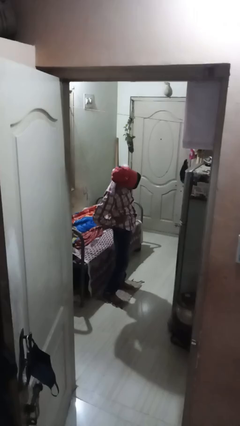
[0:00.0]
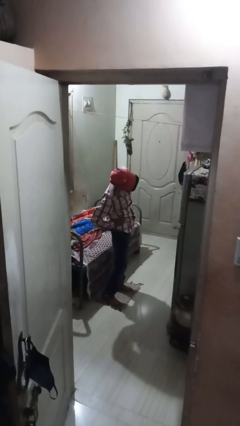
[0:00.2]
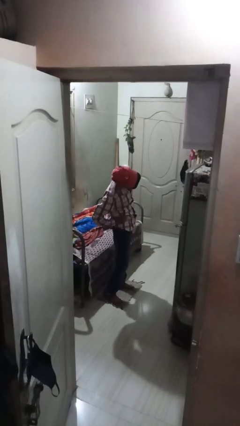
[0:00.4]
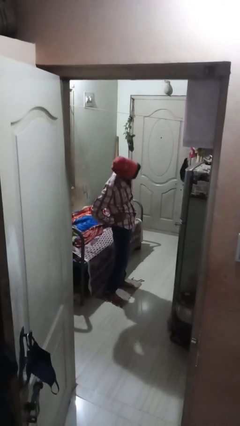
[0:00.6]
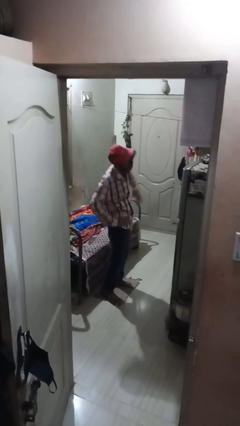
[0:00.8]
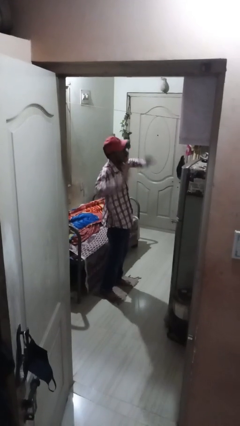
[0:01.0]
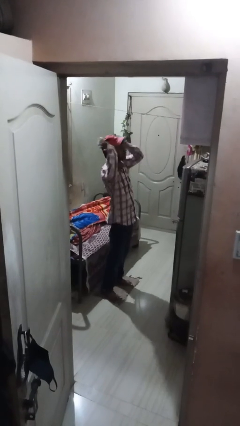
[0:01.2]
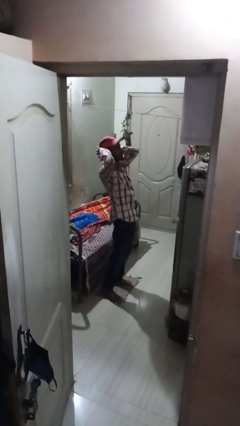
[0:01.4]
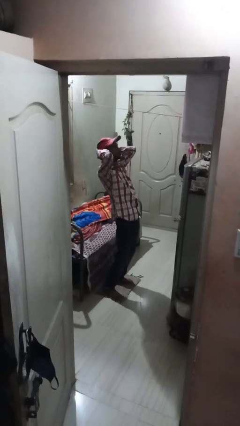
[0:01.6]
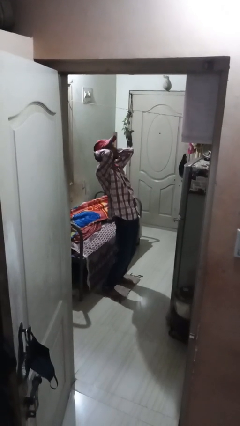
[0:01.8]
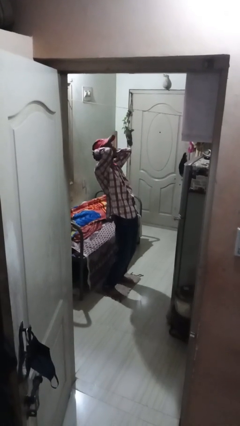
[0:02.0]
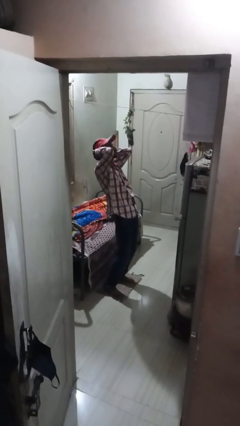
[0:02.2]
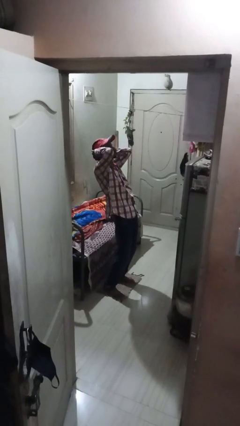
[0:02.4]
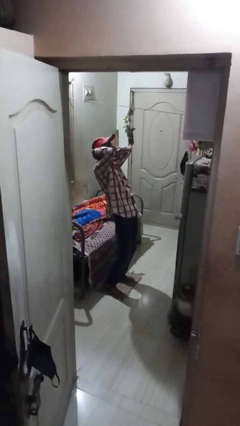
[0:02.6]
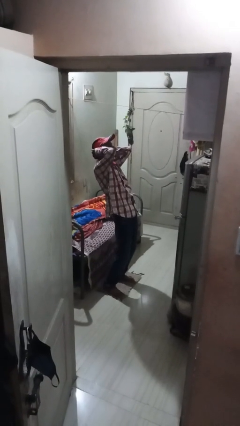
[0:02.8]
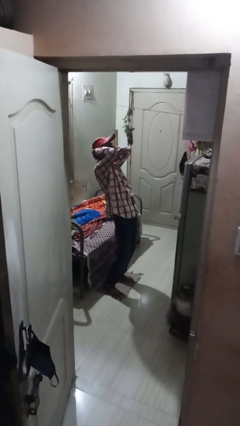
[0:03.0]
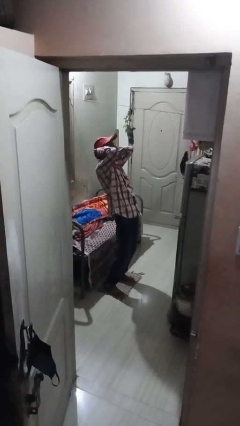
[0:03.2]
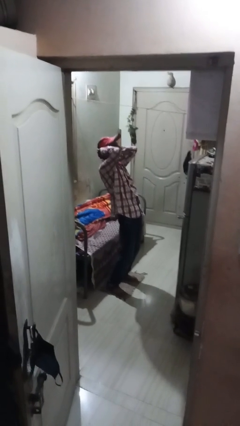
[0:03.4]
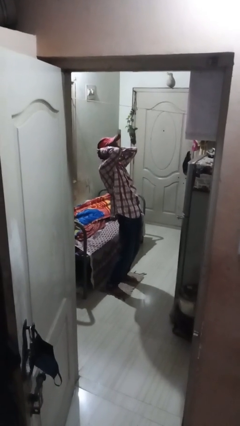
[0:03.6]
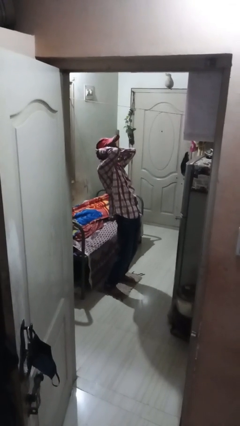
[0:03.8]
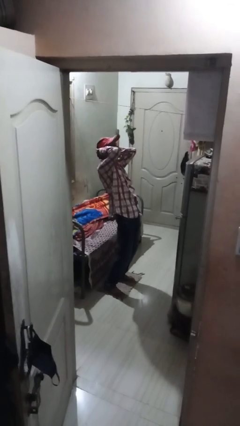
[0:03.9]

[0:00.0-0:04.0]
person stretches arms over head

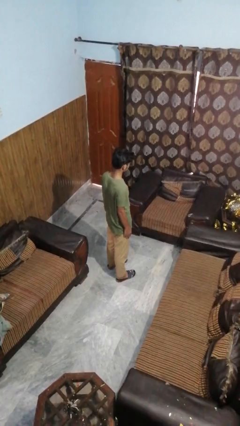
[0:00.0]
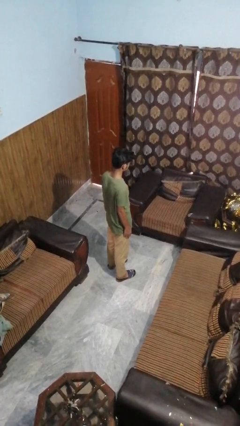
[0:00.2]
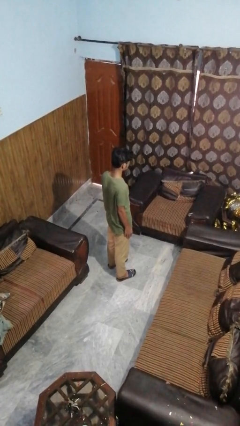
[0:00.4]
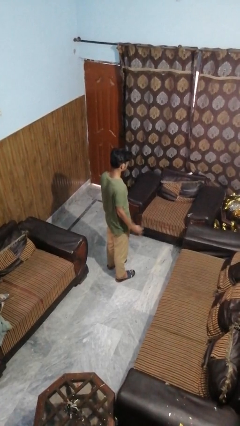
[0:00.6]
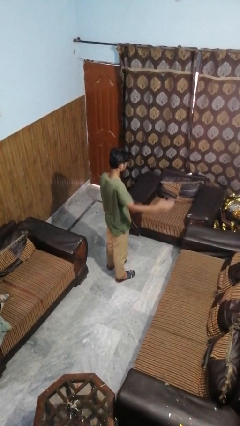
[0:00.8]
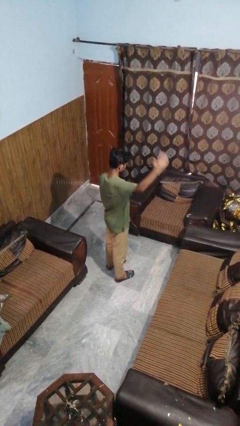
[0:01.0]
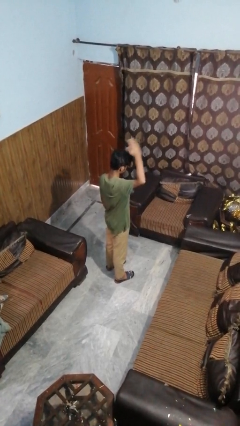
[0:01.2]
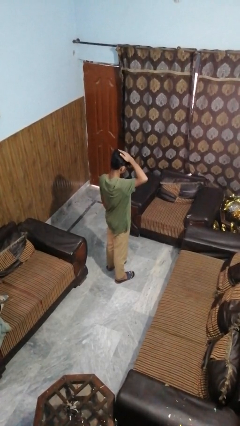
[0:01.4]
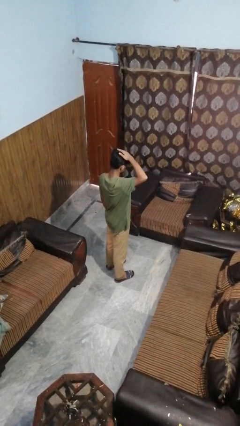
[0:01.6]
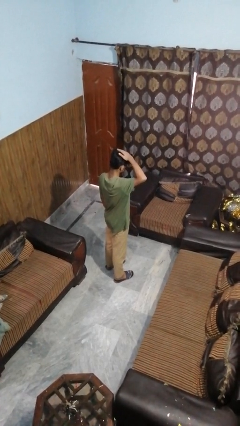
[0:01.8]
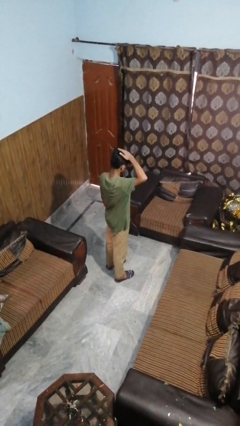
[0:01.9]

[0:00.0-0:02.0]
person pats head

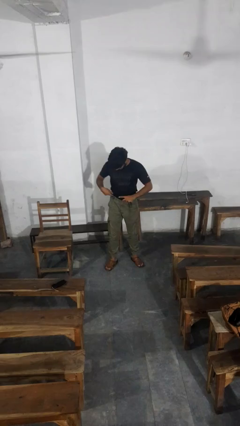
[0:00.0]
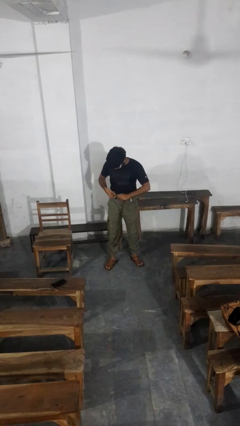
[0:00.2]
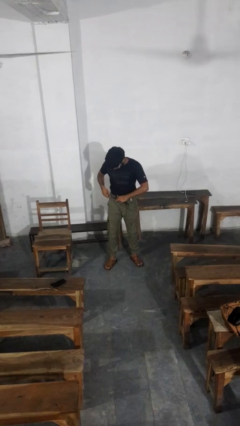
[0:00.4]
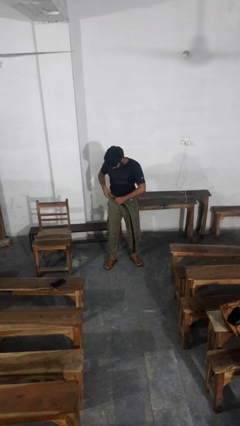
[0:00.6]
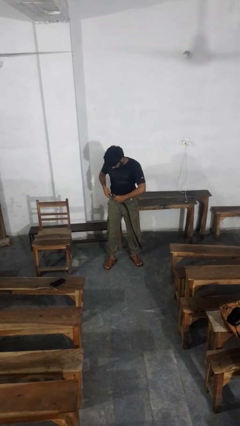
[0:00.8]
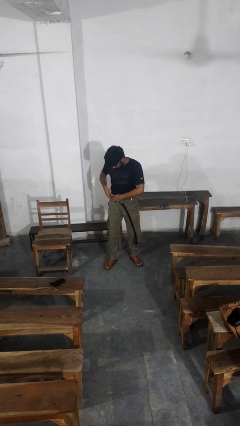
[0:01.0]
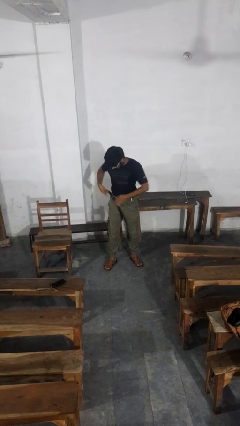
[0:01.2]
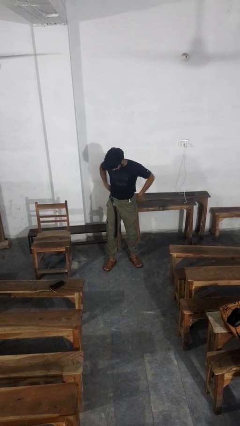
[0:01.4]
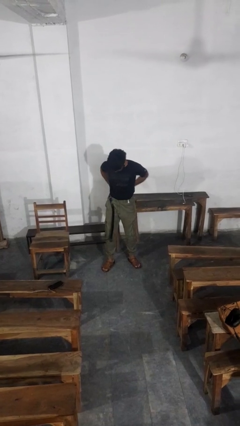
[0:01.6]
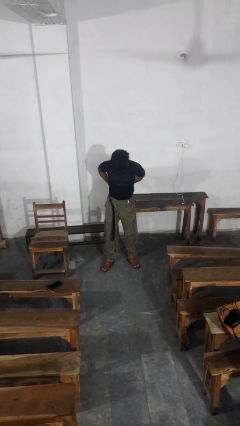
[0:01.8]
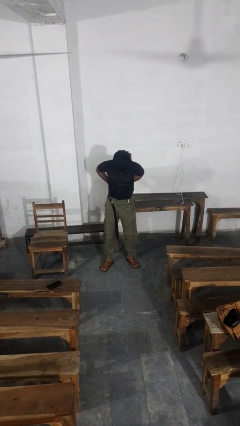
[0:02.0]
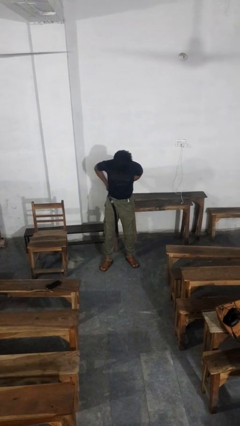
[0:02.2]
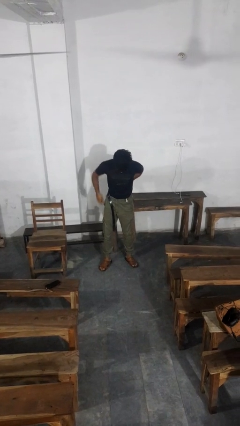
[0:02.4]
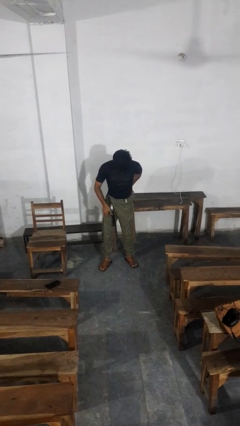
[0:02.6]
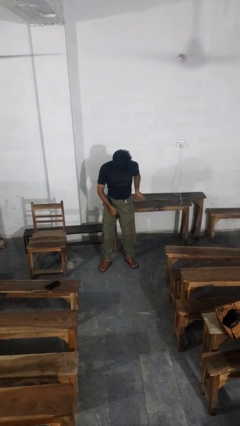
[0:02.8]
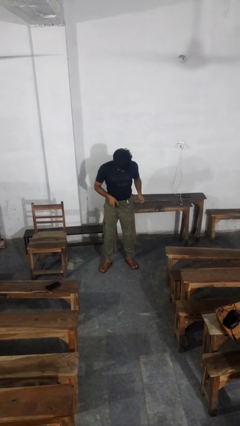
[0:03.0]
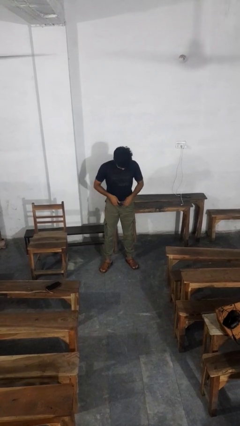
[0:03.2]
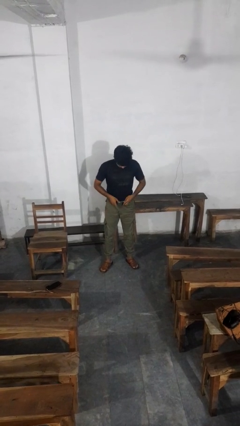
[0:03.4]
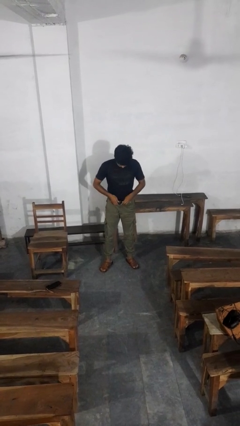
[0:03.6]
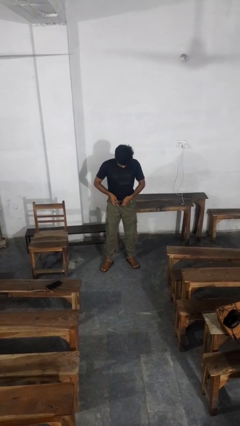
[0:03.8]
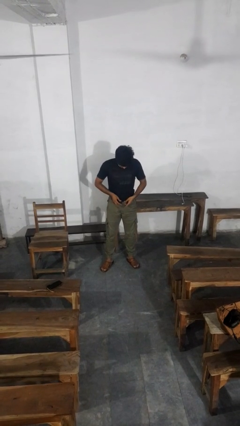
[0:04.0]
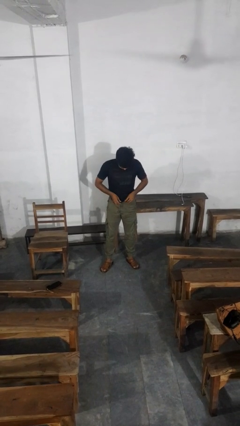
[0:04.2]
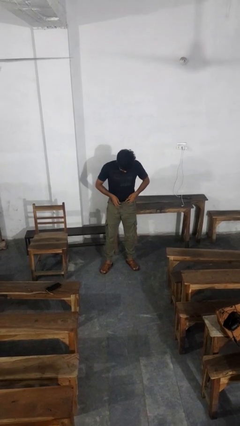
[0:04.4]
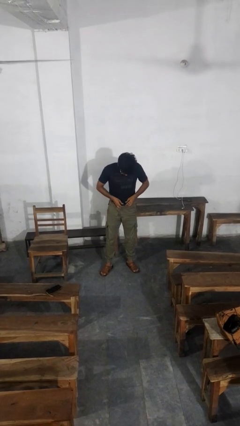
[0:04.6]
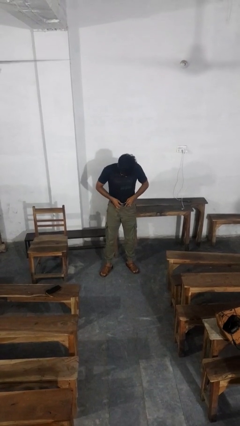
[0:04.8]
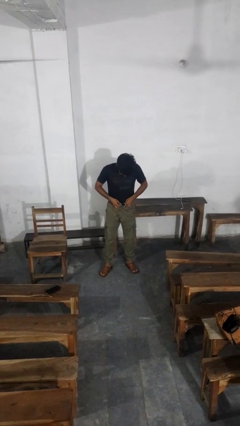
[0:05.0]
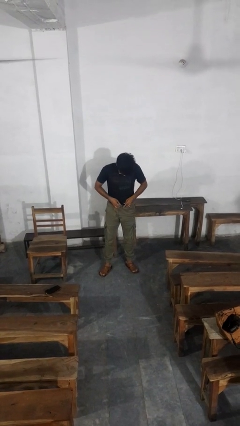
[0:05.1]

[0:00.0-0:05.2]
person puts on belt

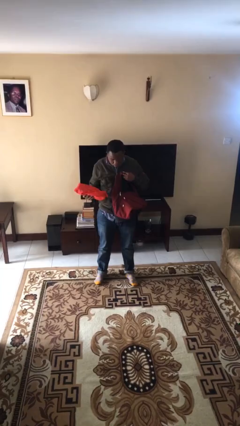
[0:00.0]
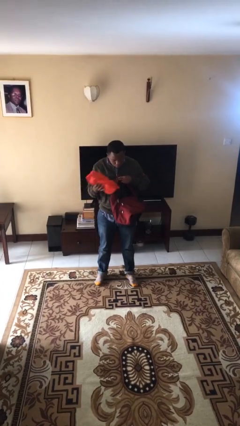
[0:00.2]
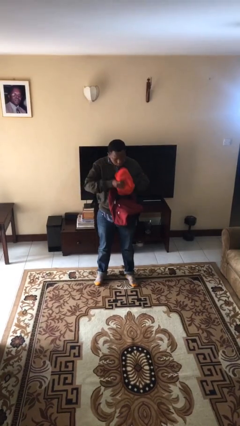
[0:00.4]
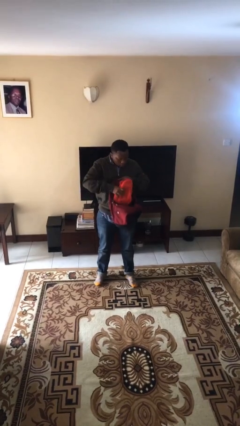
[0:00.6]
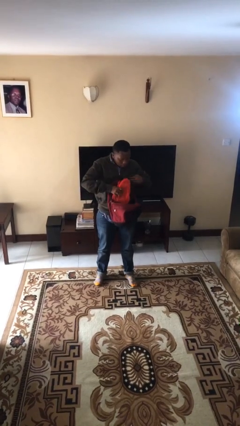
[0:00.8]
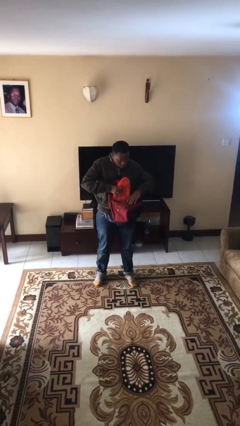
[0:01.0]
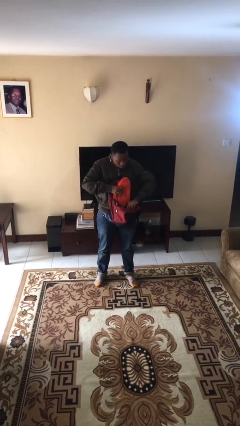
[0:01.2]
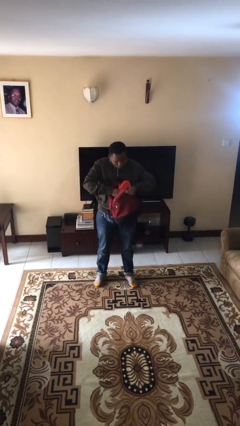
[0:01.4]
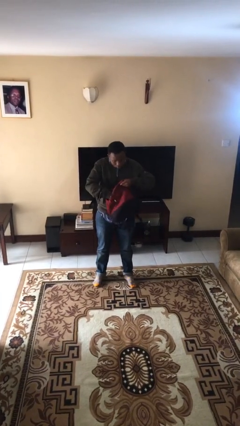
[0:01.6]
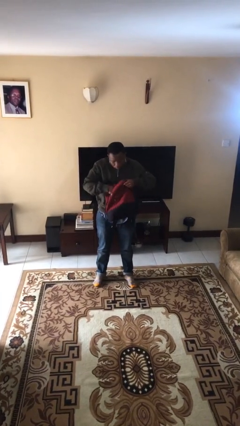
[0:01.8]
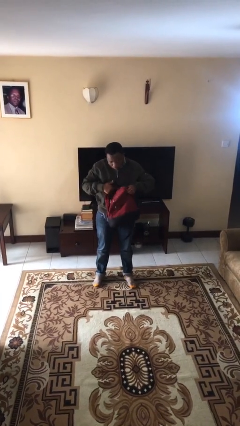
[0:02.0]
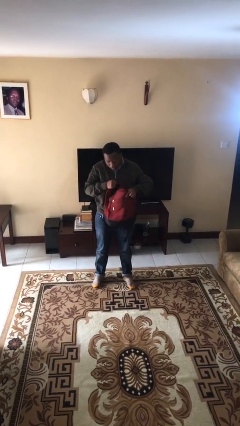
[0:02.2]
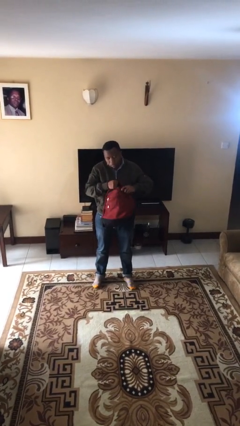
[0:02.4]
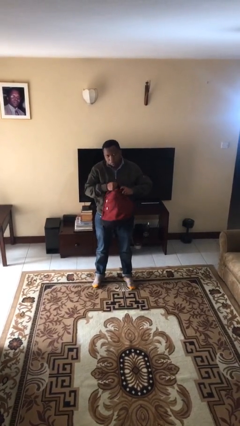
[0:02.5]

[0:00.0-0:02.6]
person puts object into backpack

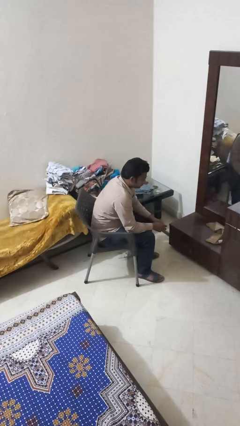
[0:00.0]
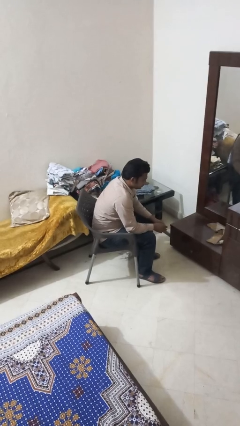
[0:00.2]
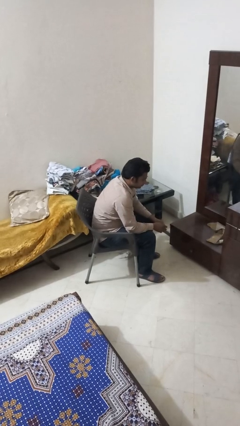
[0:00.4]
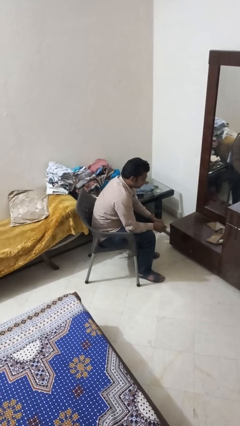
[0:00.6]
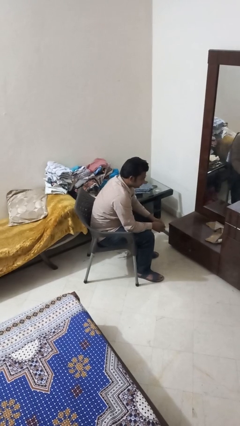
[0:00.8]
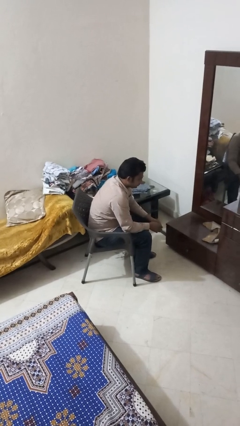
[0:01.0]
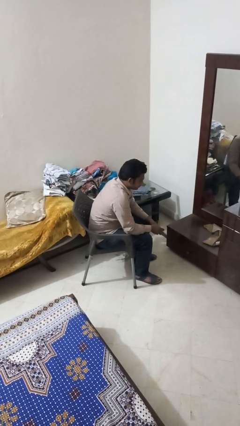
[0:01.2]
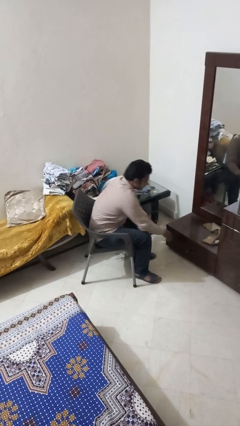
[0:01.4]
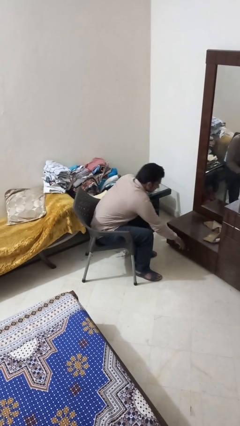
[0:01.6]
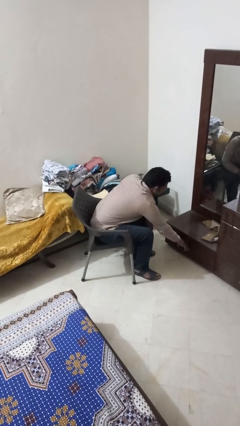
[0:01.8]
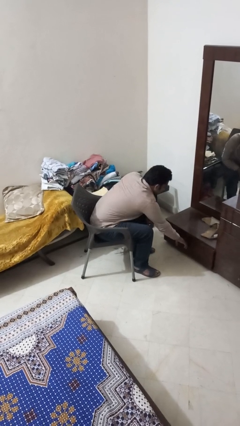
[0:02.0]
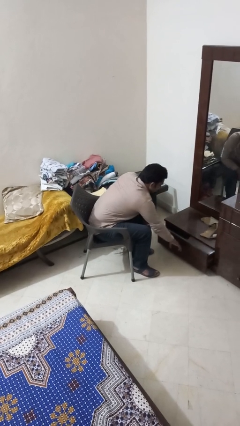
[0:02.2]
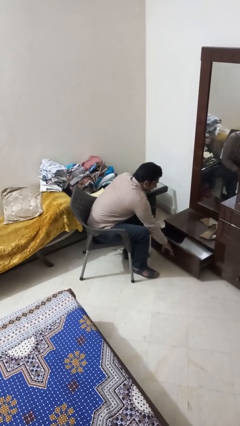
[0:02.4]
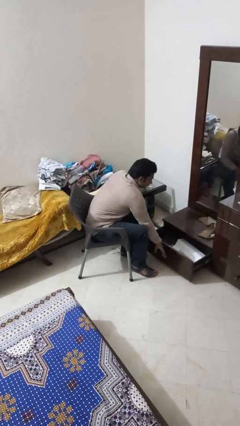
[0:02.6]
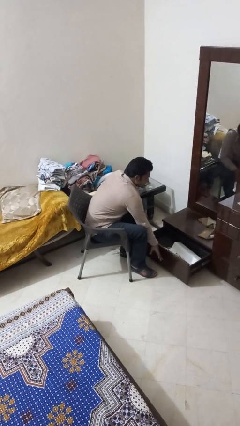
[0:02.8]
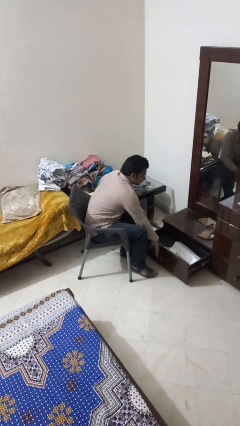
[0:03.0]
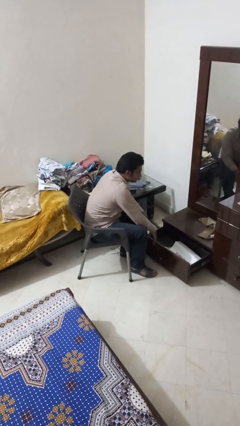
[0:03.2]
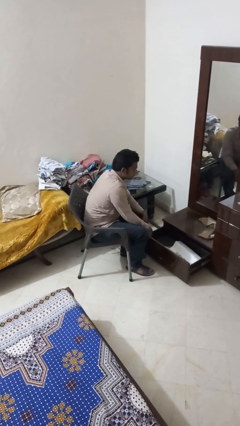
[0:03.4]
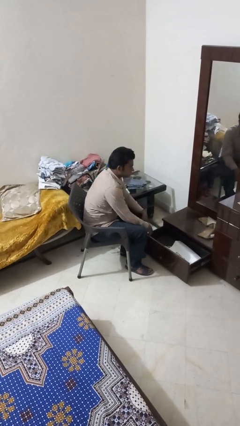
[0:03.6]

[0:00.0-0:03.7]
person opens dresser drawer

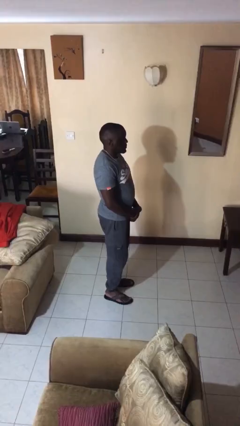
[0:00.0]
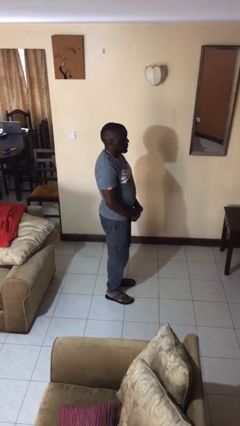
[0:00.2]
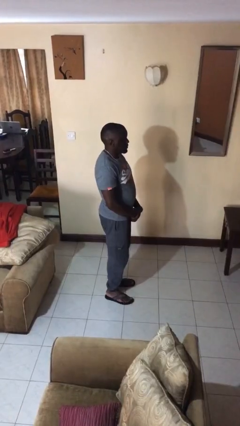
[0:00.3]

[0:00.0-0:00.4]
person twirls
